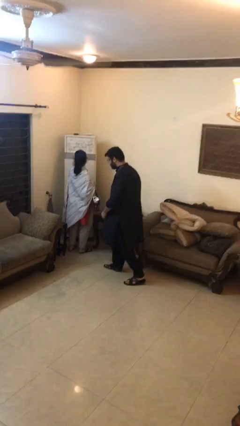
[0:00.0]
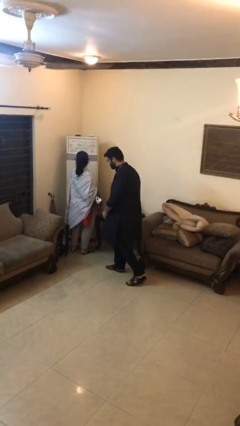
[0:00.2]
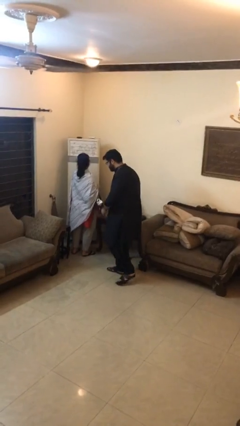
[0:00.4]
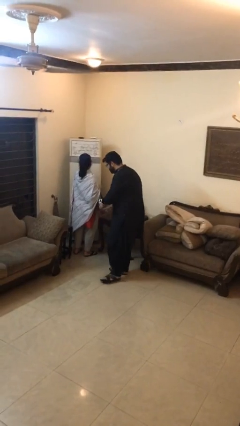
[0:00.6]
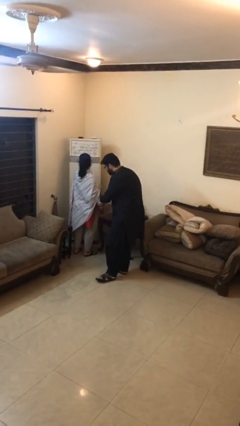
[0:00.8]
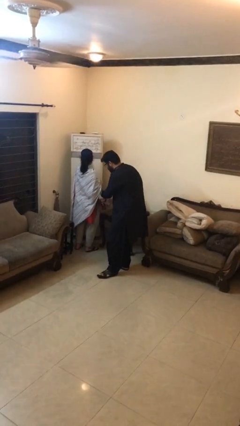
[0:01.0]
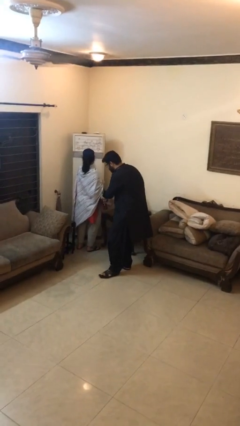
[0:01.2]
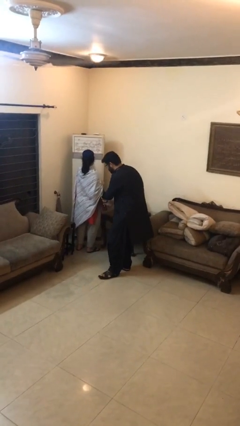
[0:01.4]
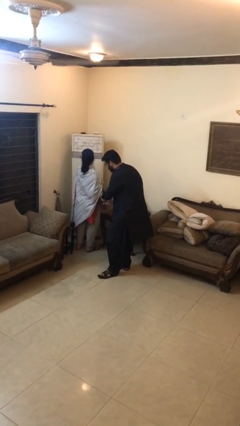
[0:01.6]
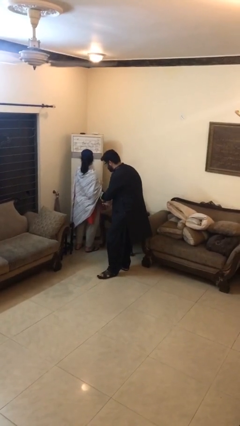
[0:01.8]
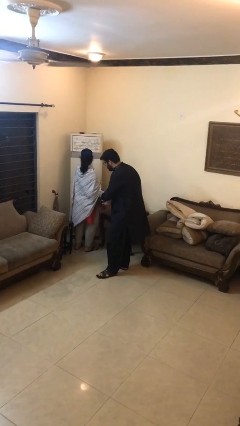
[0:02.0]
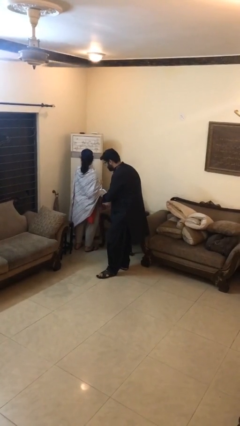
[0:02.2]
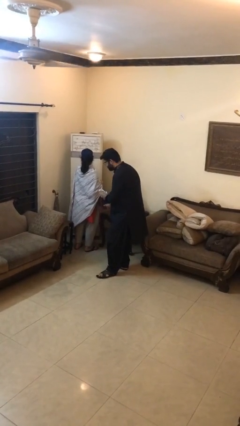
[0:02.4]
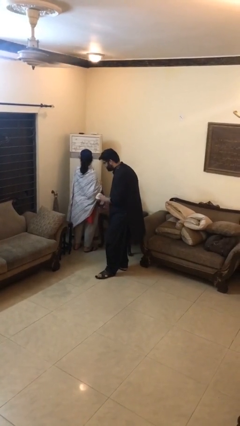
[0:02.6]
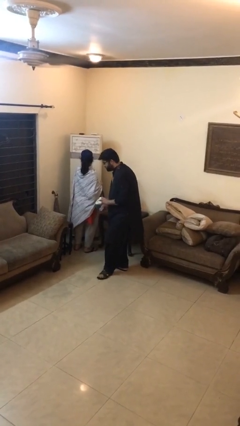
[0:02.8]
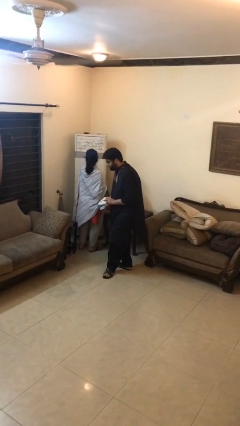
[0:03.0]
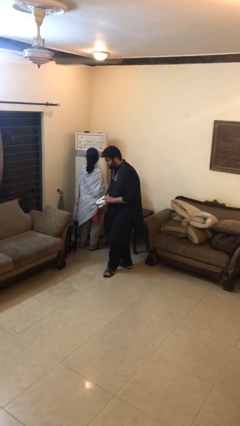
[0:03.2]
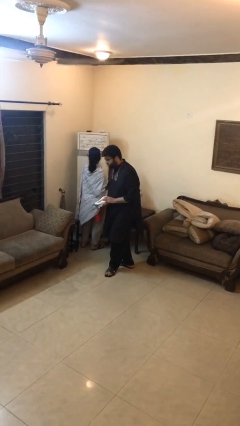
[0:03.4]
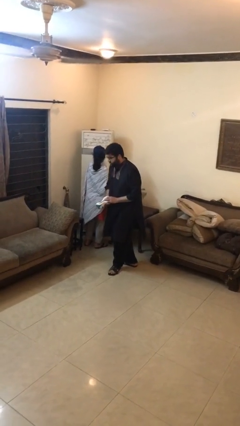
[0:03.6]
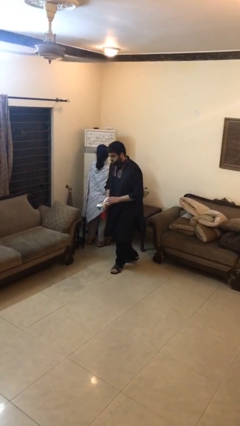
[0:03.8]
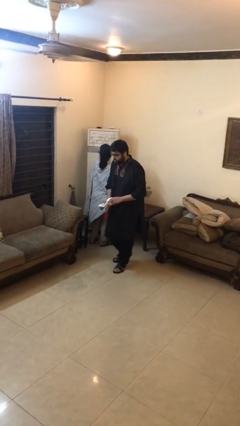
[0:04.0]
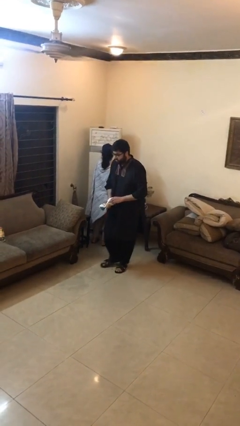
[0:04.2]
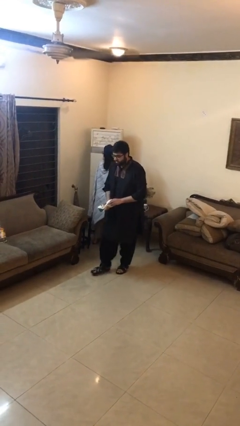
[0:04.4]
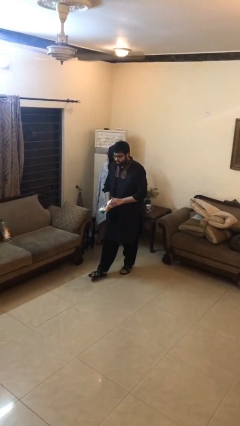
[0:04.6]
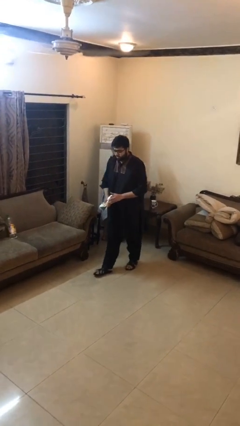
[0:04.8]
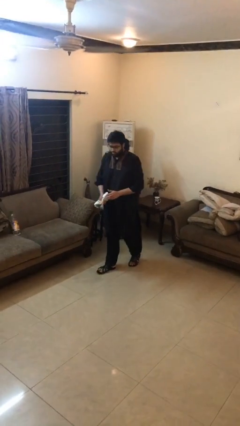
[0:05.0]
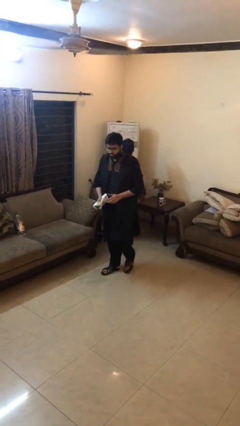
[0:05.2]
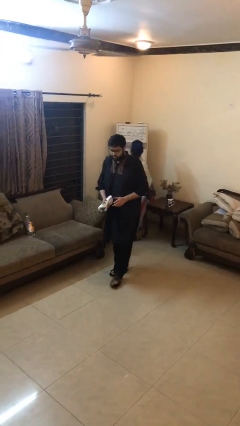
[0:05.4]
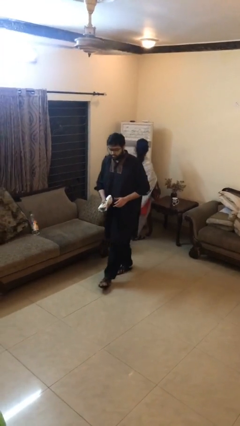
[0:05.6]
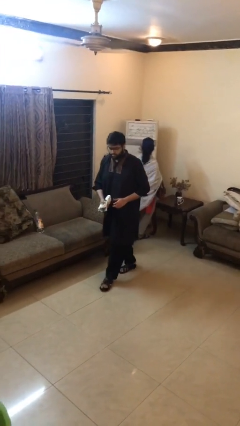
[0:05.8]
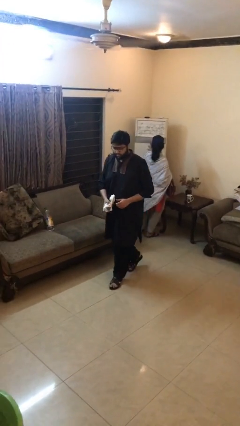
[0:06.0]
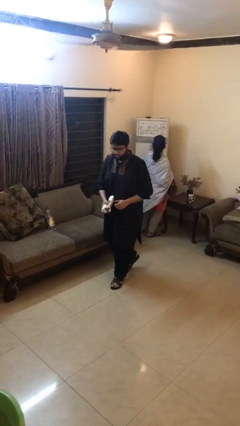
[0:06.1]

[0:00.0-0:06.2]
person steals object from person

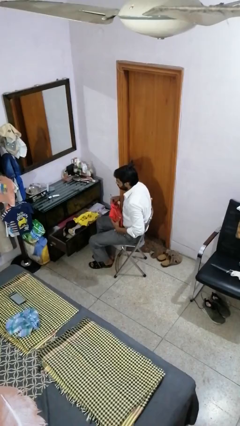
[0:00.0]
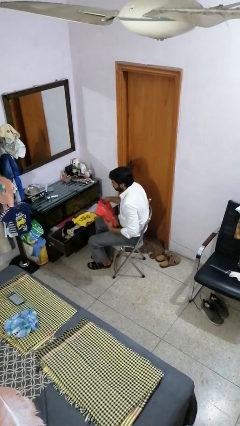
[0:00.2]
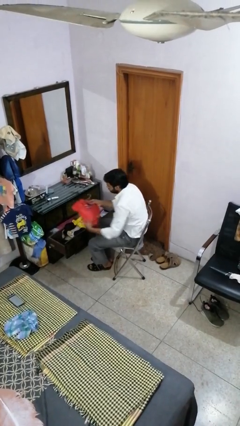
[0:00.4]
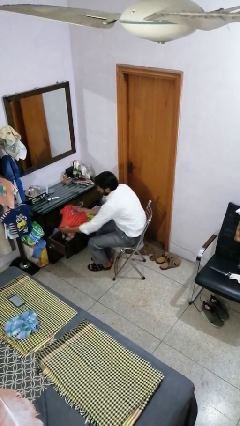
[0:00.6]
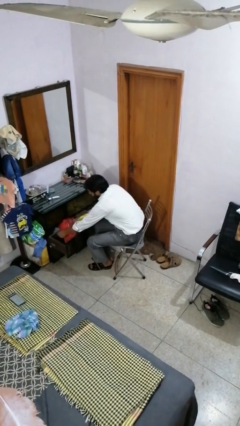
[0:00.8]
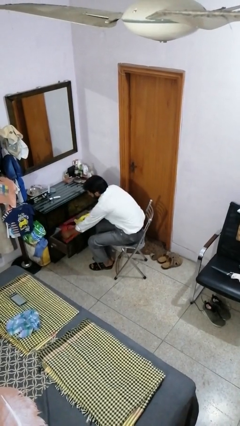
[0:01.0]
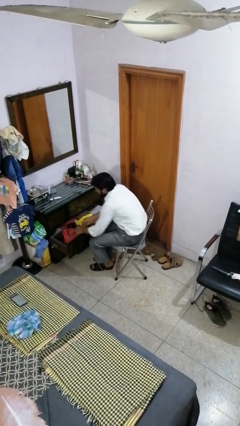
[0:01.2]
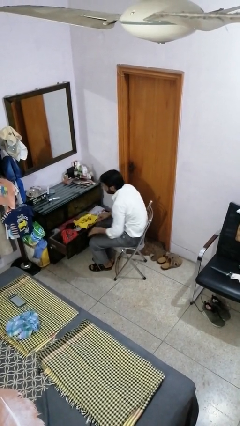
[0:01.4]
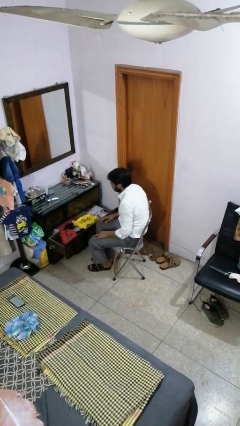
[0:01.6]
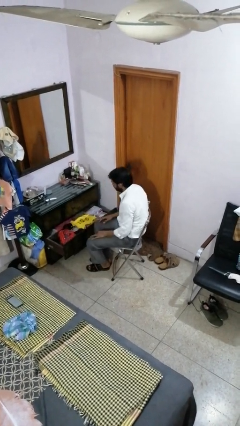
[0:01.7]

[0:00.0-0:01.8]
person puts clothes into dresser

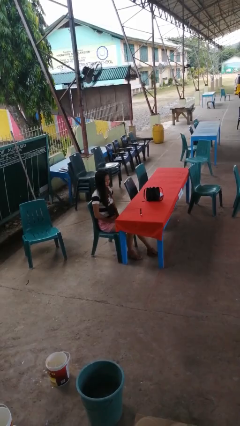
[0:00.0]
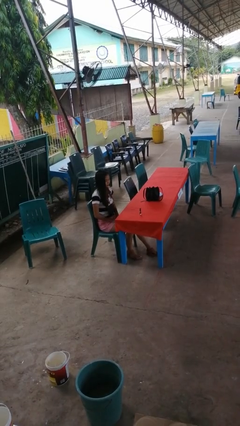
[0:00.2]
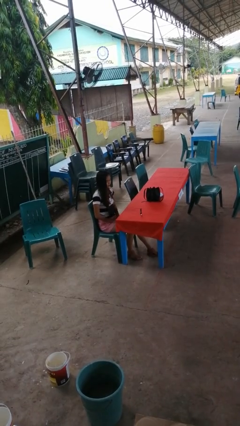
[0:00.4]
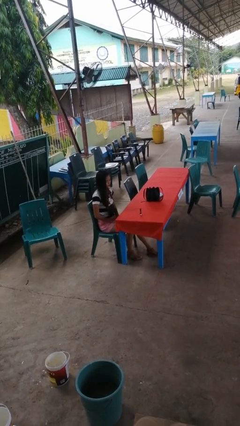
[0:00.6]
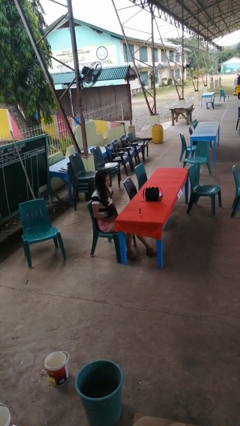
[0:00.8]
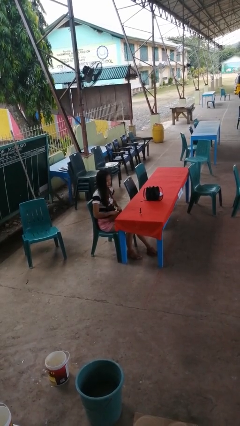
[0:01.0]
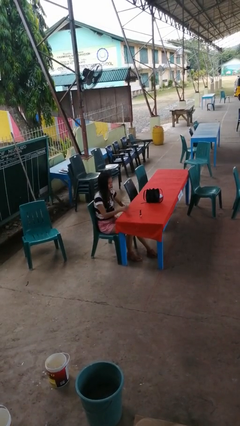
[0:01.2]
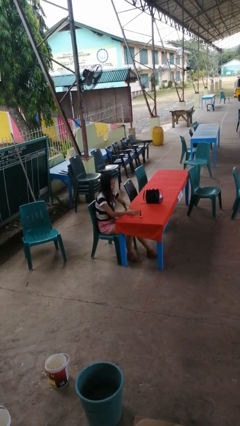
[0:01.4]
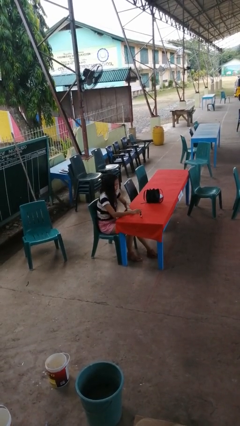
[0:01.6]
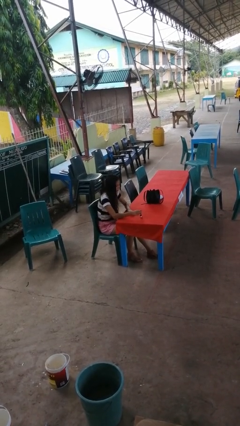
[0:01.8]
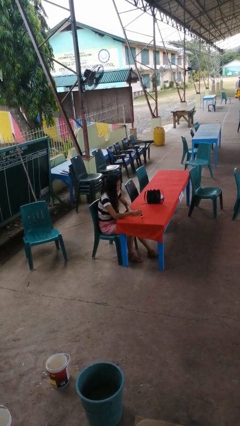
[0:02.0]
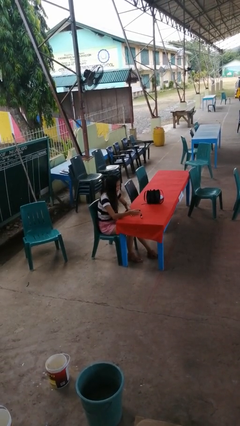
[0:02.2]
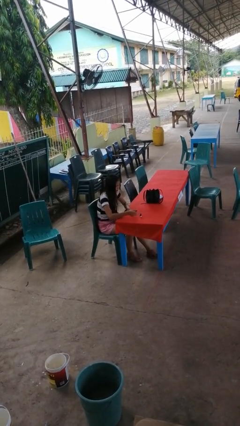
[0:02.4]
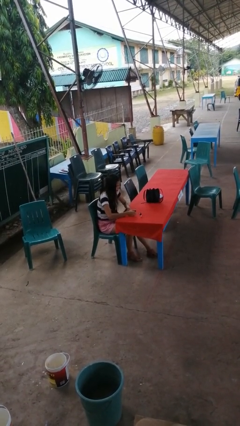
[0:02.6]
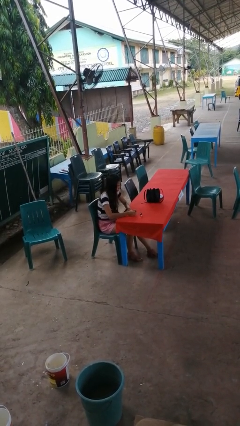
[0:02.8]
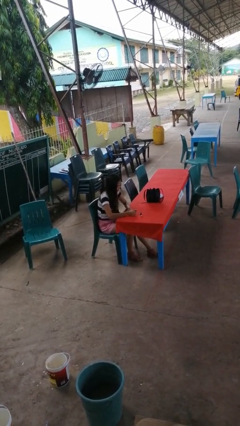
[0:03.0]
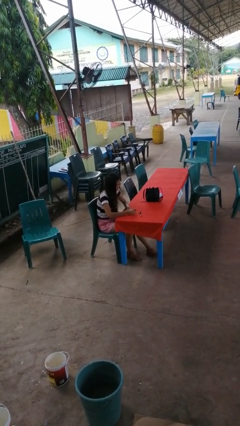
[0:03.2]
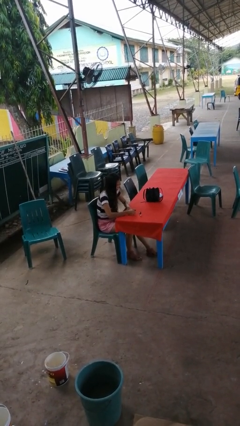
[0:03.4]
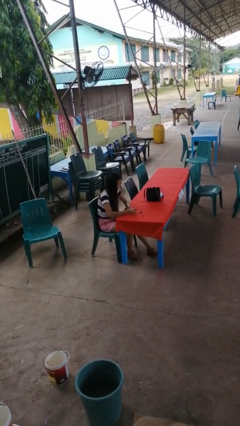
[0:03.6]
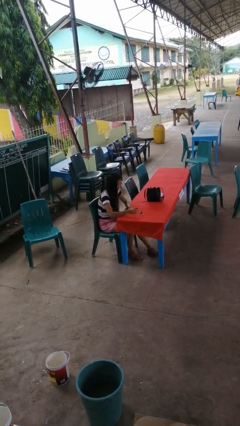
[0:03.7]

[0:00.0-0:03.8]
person paints fingernails

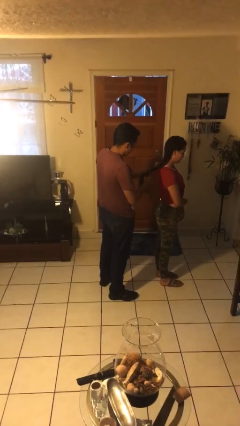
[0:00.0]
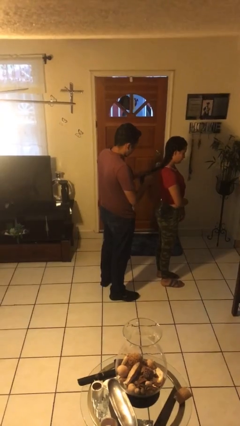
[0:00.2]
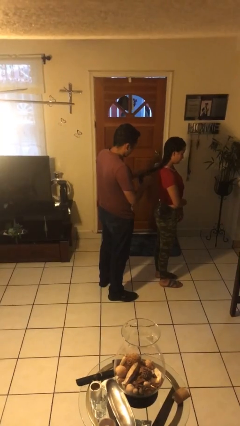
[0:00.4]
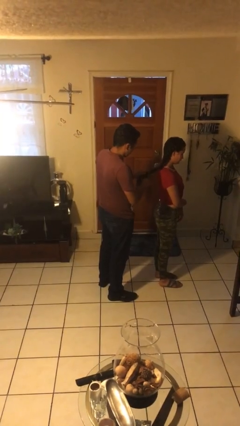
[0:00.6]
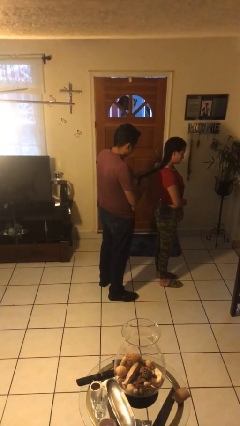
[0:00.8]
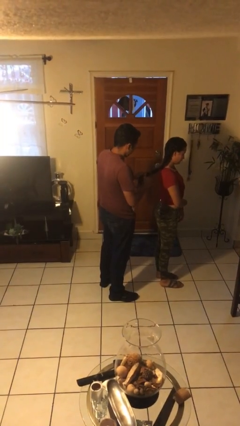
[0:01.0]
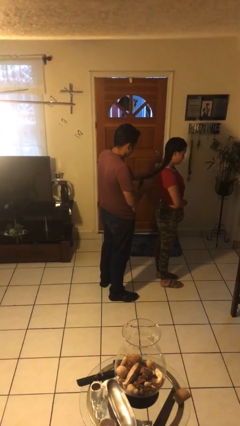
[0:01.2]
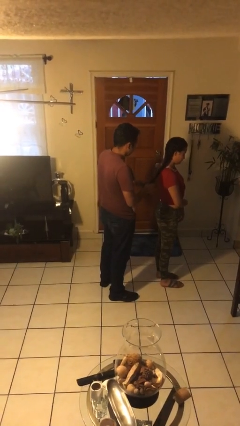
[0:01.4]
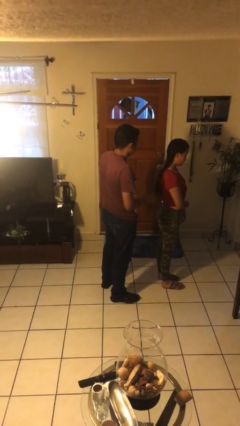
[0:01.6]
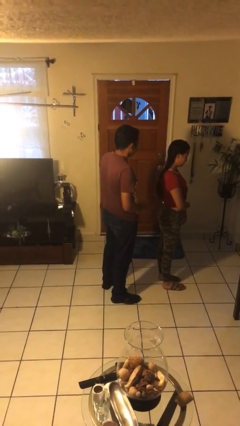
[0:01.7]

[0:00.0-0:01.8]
person braids hair of person

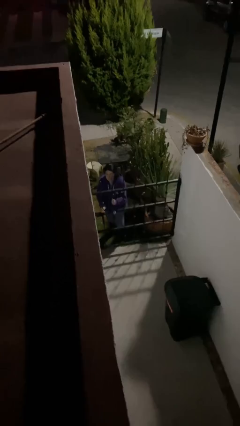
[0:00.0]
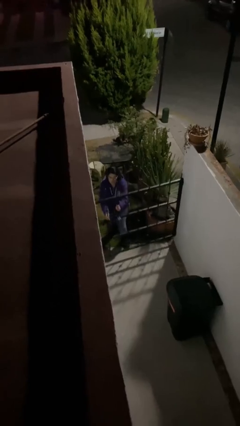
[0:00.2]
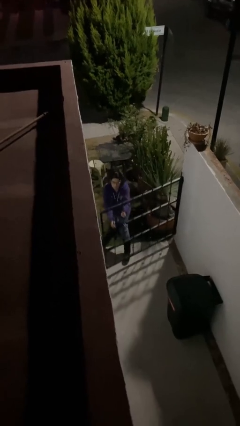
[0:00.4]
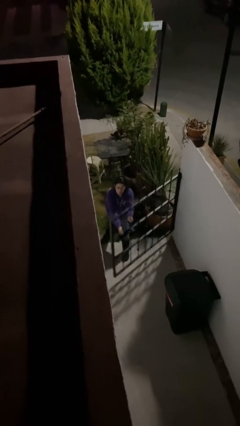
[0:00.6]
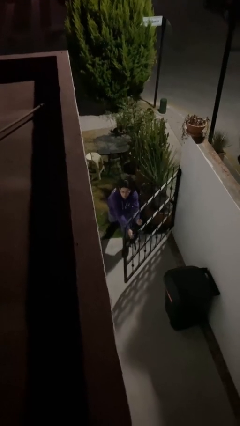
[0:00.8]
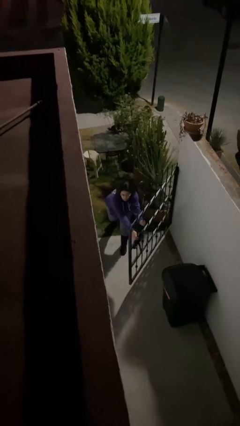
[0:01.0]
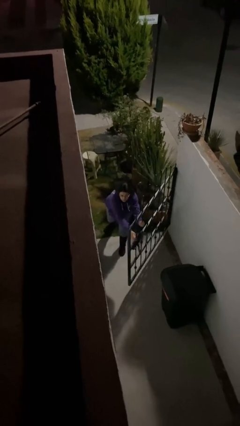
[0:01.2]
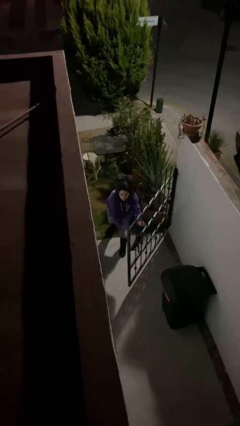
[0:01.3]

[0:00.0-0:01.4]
person opens facility door

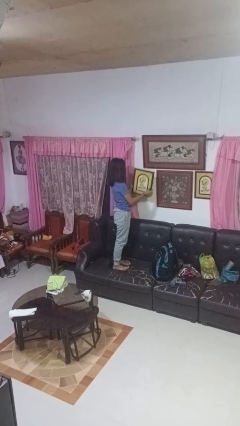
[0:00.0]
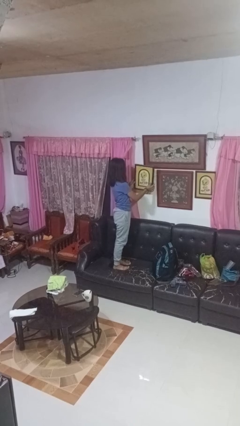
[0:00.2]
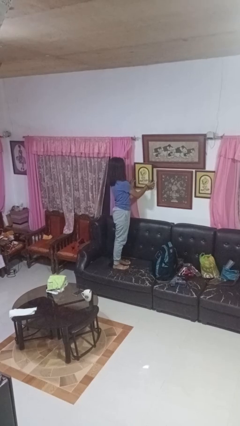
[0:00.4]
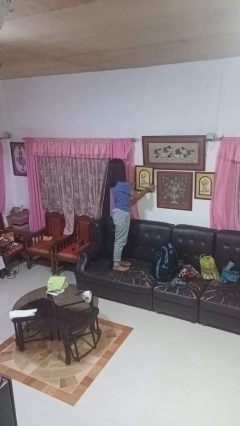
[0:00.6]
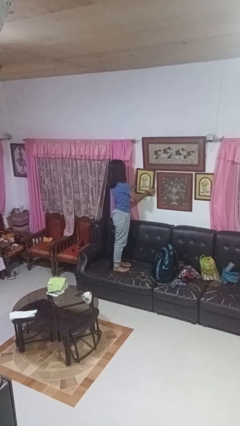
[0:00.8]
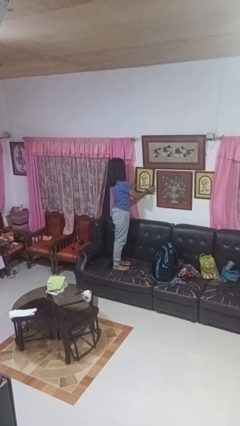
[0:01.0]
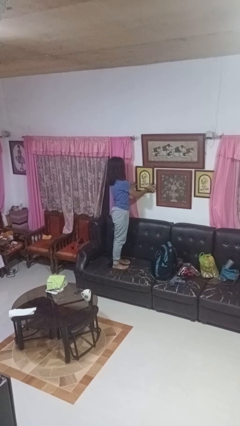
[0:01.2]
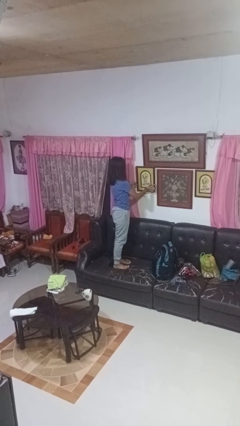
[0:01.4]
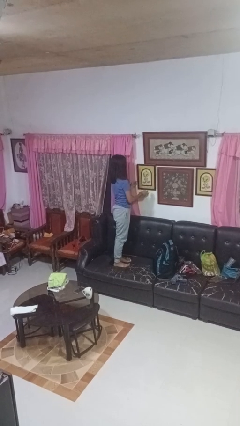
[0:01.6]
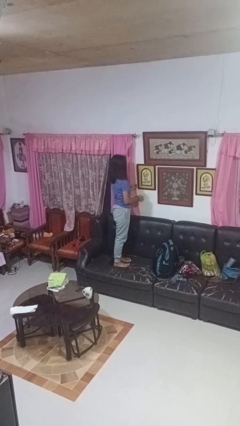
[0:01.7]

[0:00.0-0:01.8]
person puts up picture frame

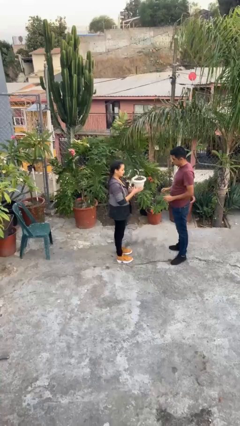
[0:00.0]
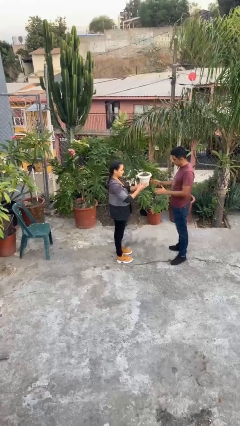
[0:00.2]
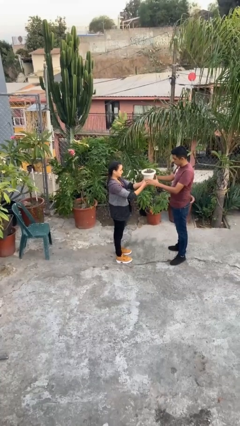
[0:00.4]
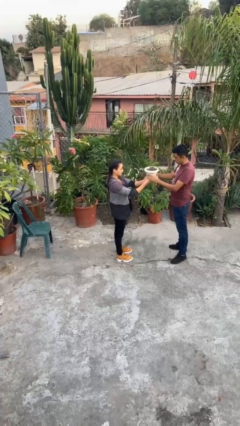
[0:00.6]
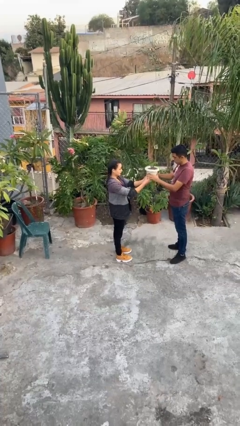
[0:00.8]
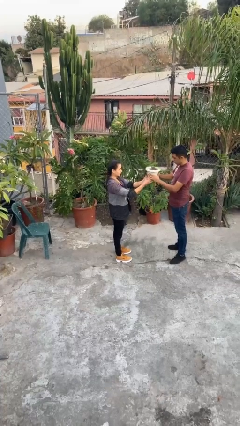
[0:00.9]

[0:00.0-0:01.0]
person transfers object to person
